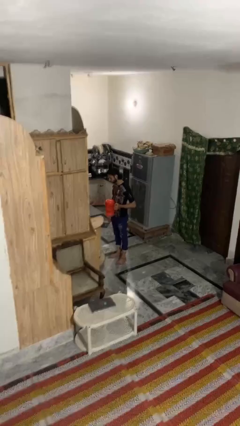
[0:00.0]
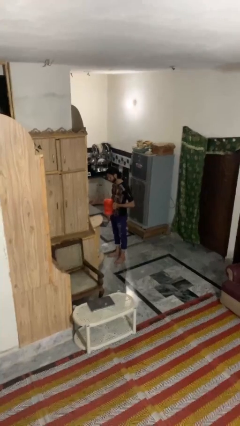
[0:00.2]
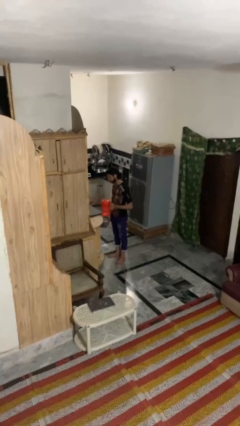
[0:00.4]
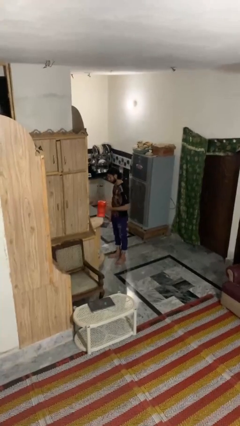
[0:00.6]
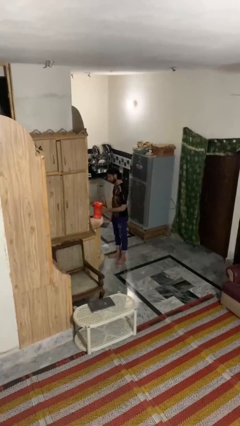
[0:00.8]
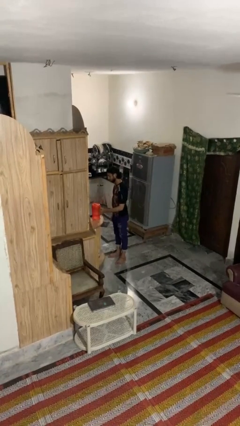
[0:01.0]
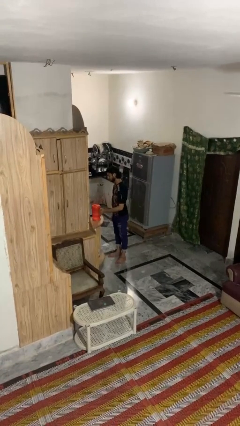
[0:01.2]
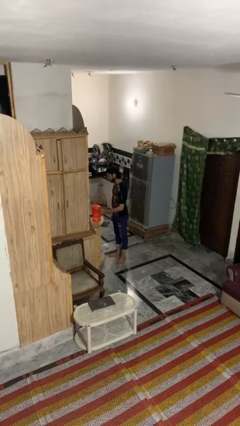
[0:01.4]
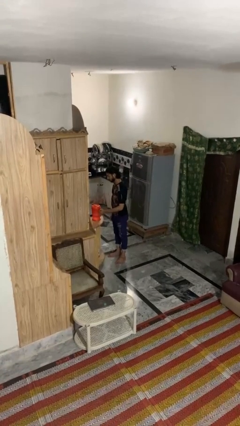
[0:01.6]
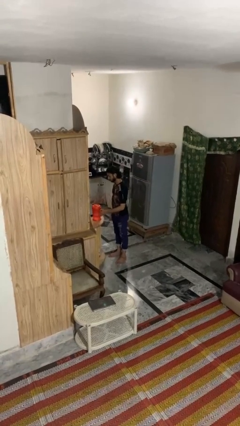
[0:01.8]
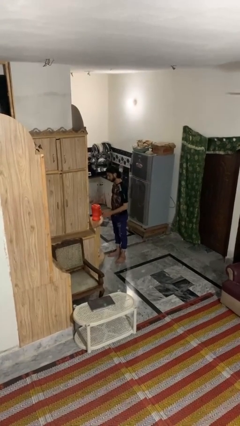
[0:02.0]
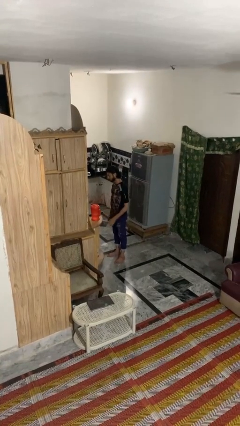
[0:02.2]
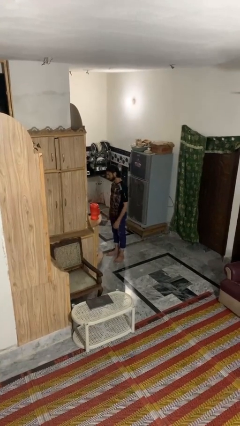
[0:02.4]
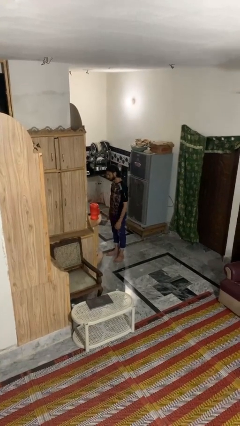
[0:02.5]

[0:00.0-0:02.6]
person puts down object on countertop

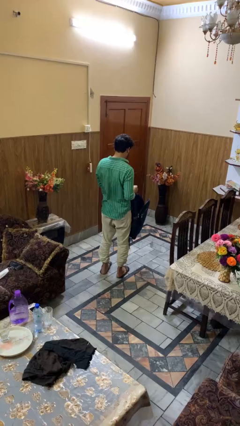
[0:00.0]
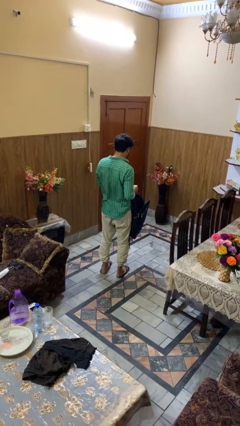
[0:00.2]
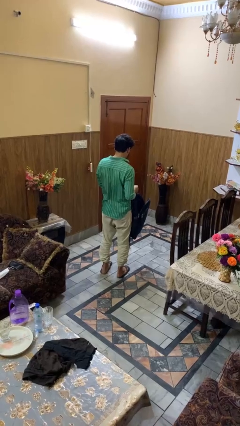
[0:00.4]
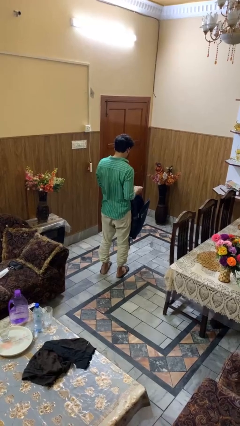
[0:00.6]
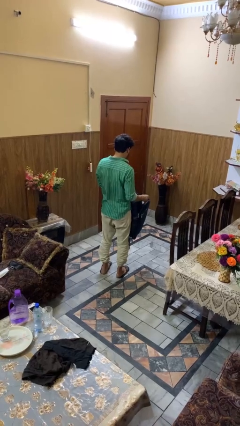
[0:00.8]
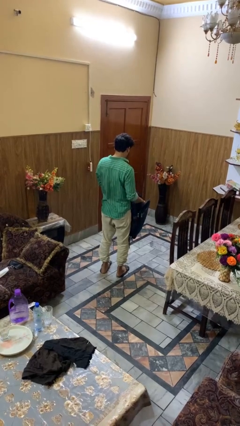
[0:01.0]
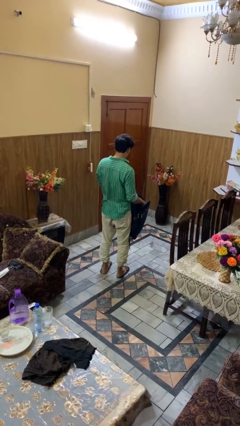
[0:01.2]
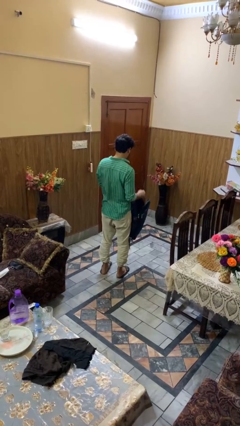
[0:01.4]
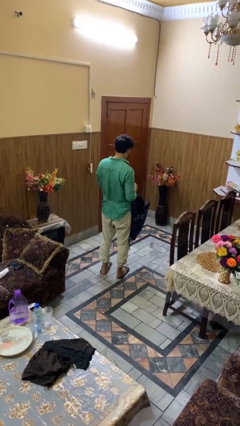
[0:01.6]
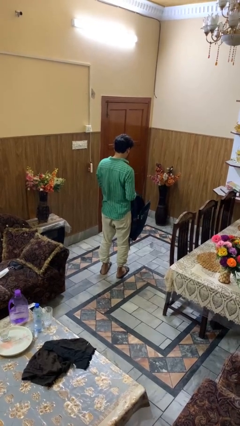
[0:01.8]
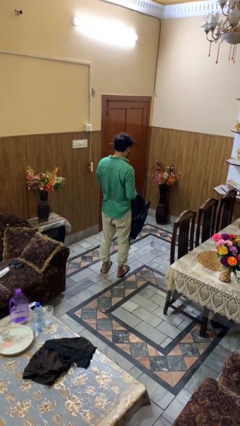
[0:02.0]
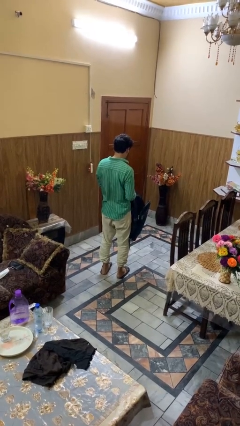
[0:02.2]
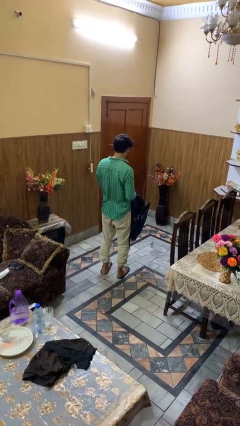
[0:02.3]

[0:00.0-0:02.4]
person puts object into backpack

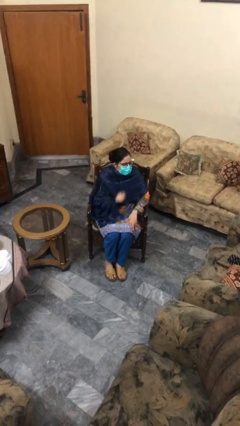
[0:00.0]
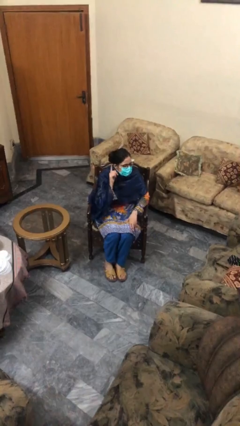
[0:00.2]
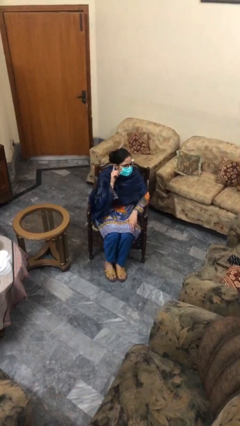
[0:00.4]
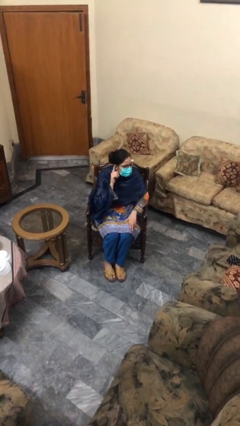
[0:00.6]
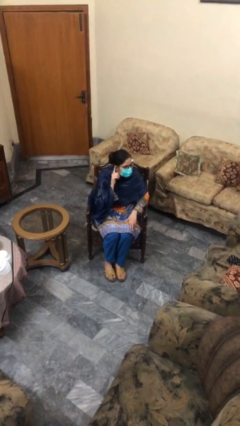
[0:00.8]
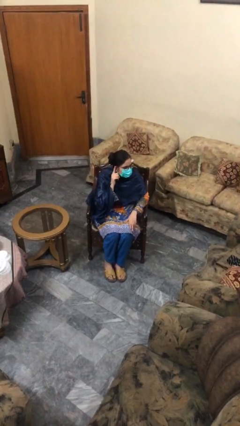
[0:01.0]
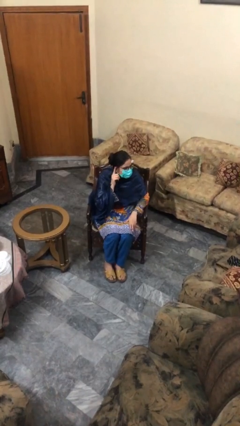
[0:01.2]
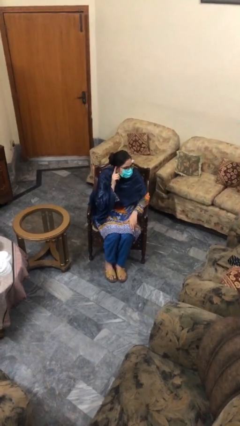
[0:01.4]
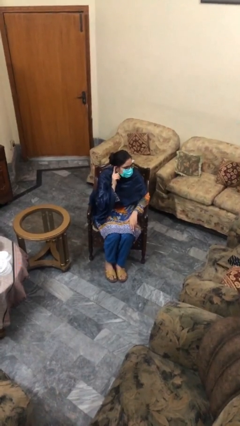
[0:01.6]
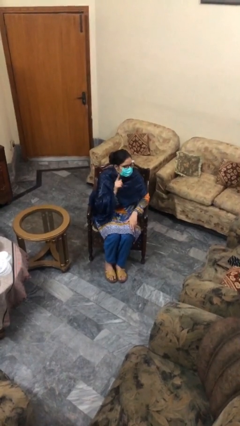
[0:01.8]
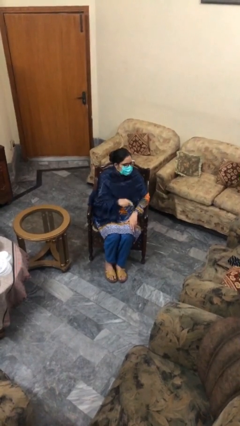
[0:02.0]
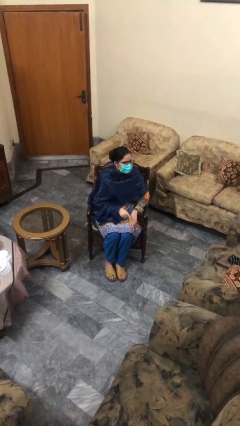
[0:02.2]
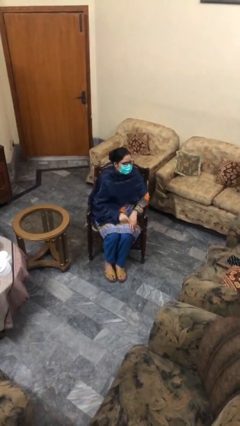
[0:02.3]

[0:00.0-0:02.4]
person gestures listen closely

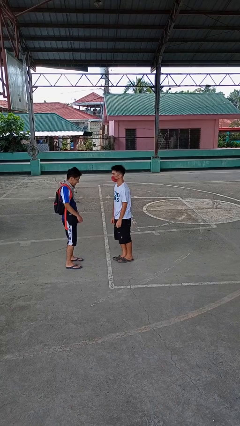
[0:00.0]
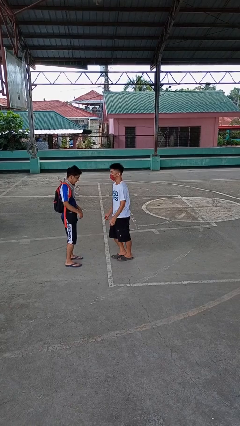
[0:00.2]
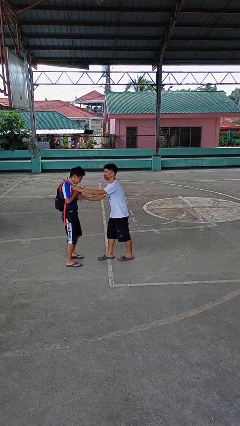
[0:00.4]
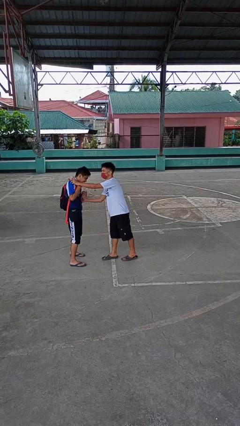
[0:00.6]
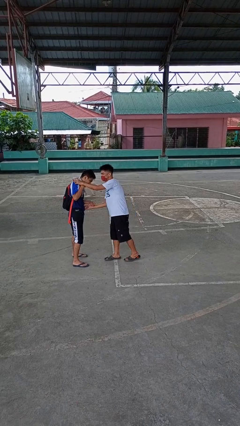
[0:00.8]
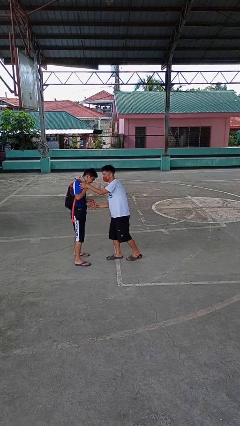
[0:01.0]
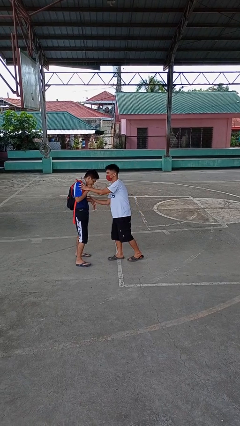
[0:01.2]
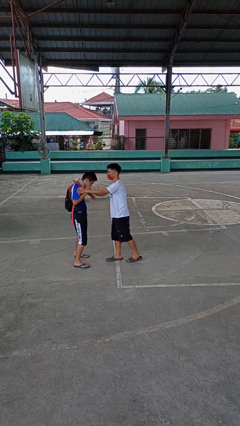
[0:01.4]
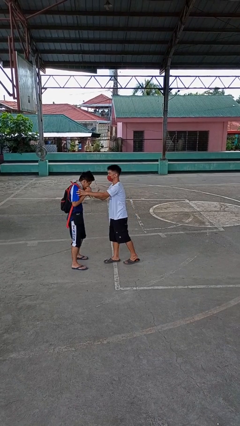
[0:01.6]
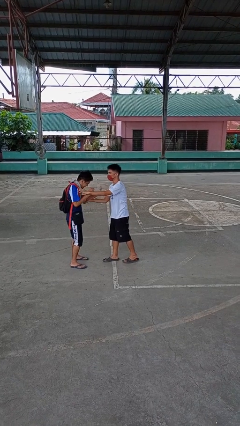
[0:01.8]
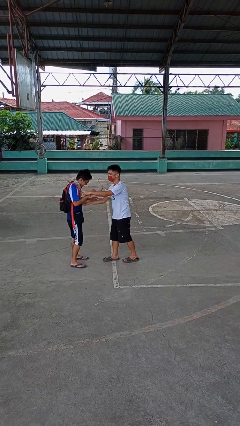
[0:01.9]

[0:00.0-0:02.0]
person tickles person

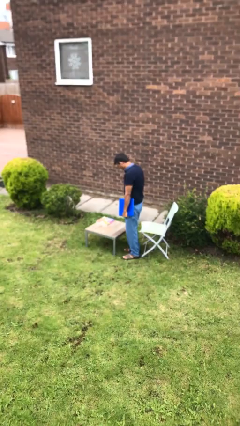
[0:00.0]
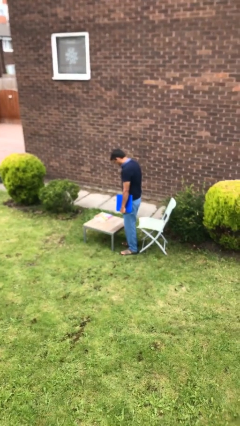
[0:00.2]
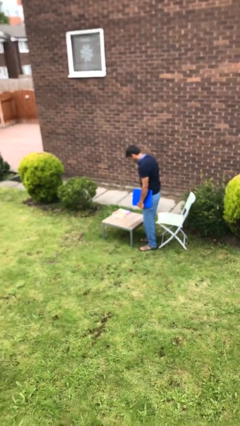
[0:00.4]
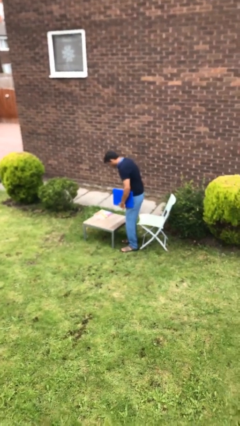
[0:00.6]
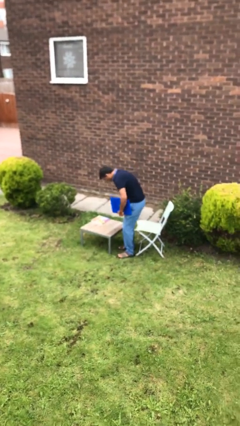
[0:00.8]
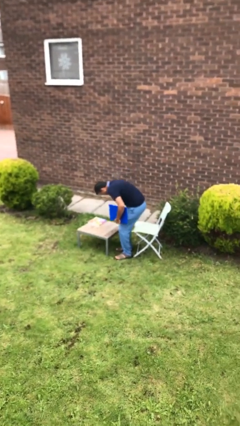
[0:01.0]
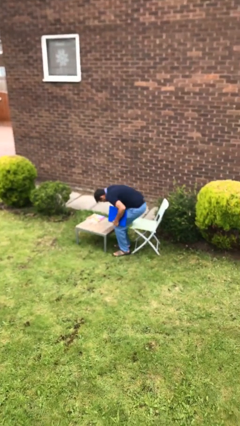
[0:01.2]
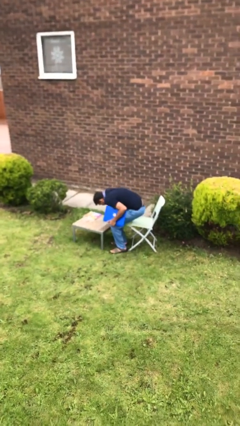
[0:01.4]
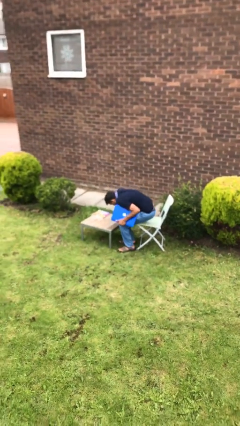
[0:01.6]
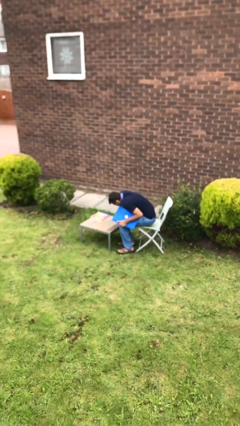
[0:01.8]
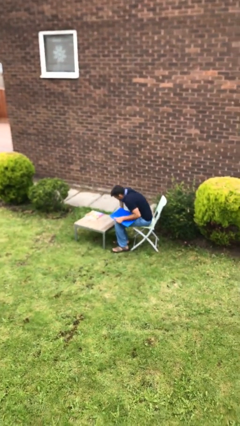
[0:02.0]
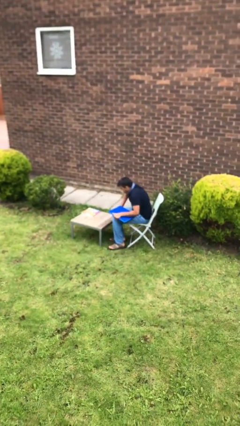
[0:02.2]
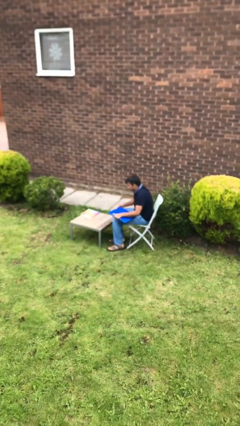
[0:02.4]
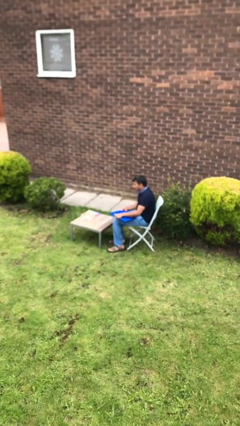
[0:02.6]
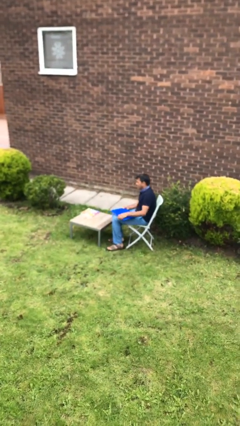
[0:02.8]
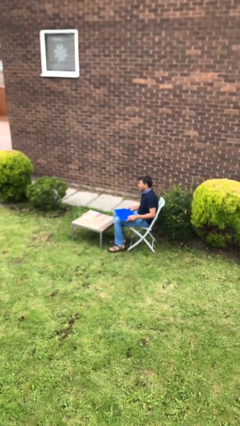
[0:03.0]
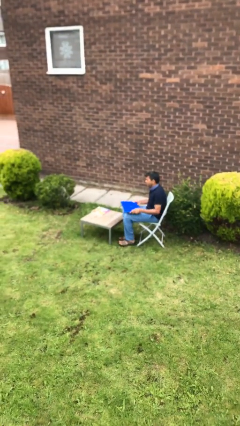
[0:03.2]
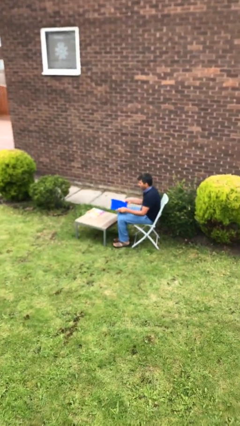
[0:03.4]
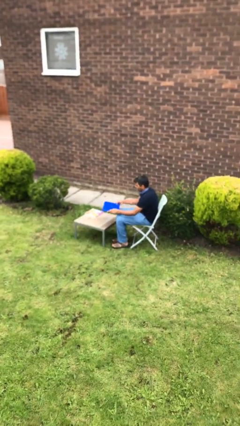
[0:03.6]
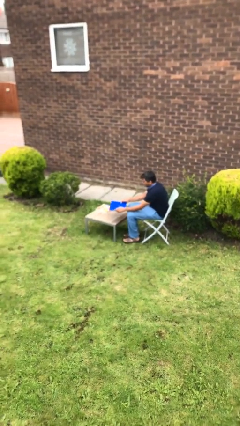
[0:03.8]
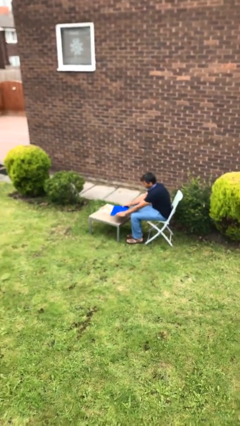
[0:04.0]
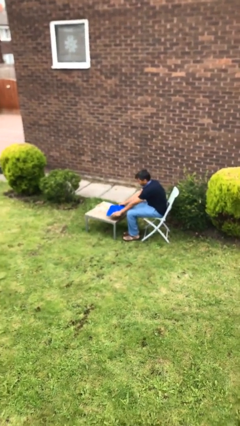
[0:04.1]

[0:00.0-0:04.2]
person sits down

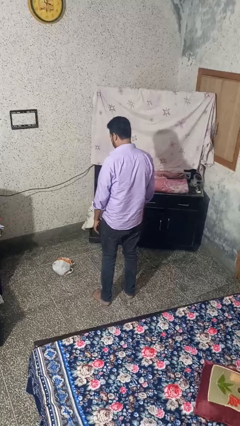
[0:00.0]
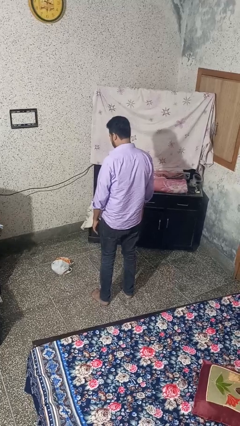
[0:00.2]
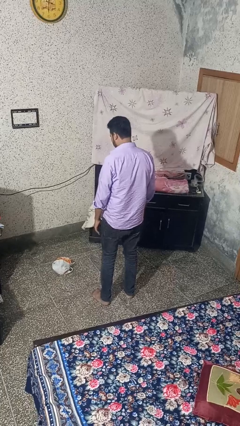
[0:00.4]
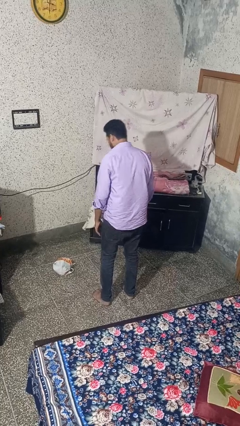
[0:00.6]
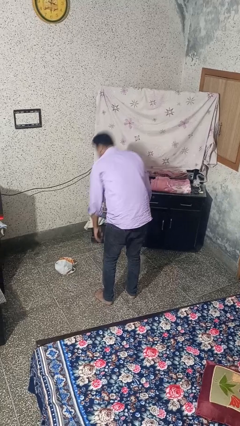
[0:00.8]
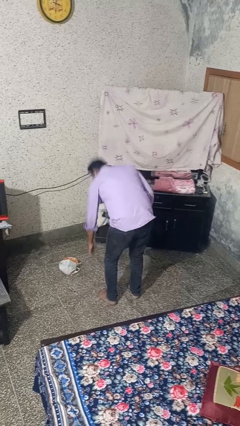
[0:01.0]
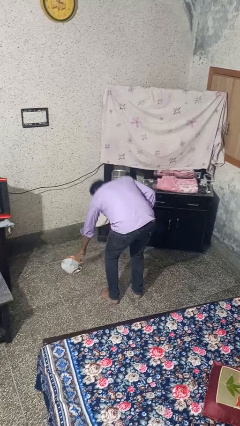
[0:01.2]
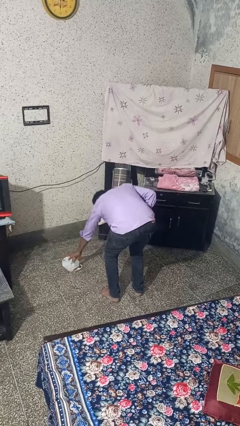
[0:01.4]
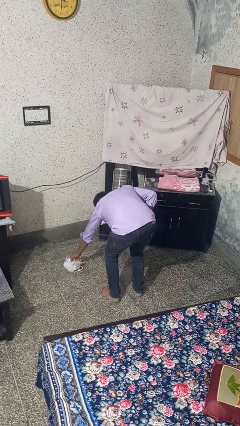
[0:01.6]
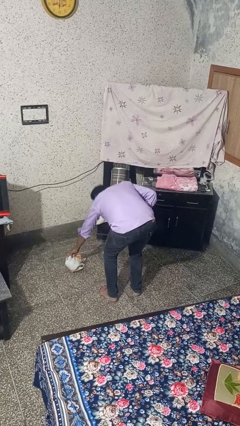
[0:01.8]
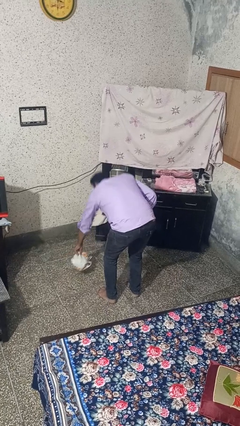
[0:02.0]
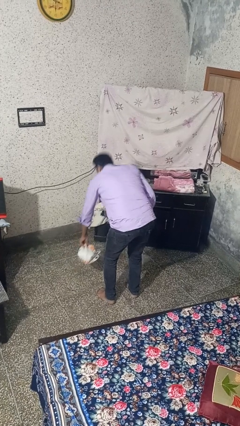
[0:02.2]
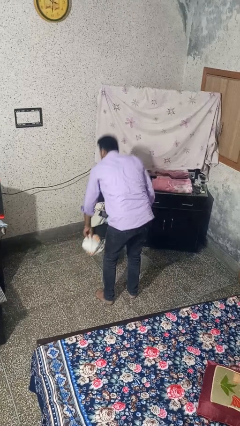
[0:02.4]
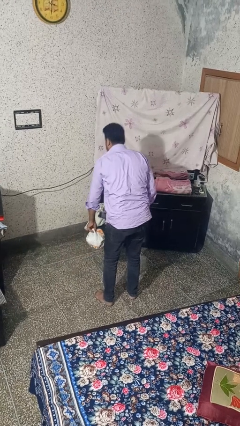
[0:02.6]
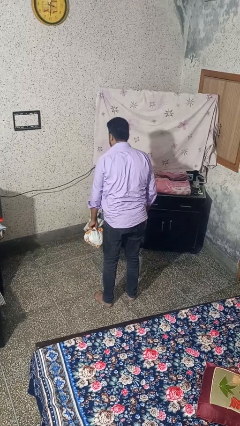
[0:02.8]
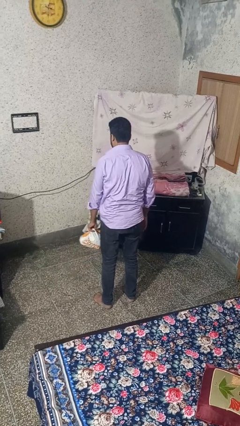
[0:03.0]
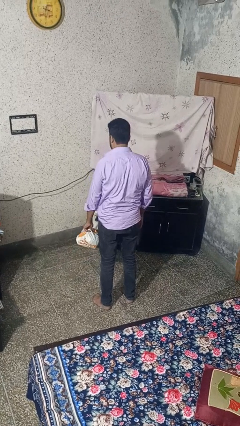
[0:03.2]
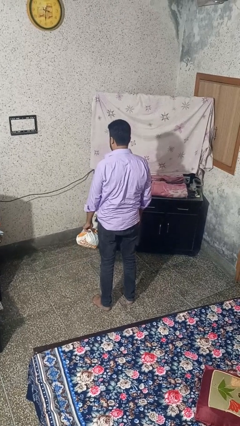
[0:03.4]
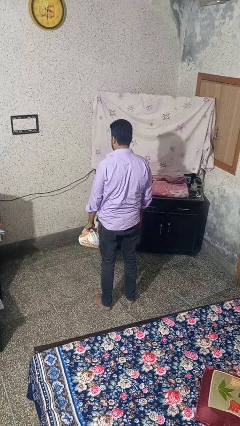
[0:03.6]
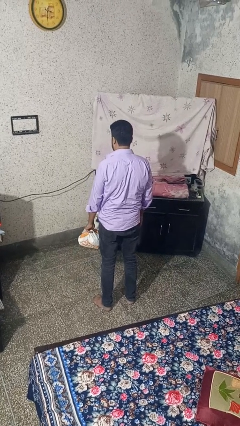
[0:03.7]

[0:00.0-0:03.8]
person picks up object from floor

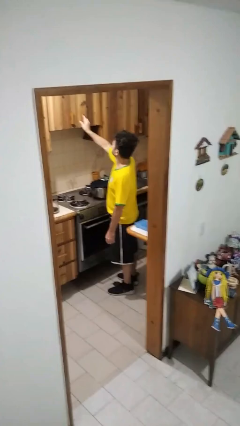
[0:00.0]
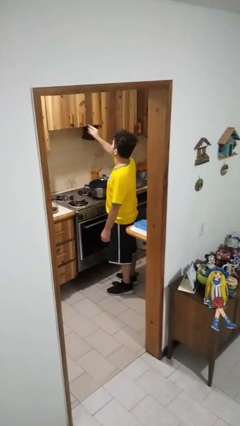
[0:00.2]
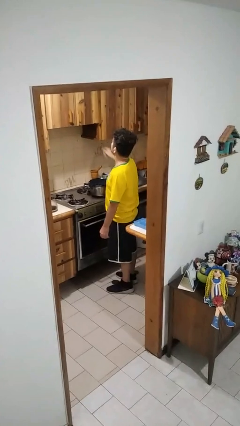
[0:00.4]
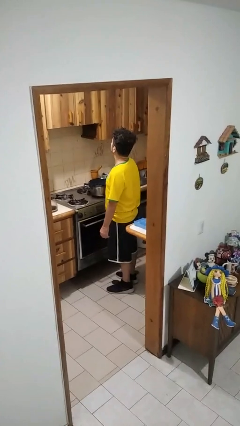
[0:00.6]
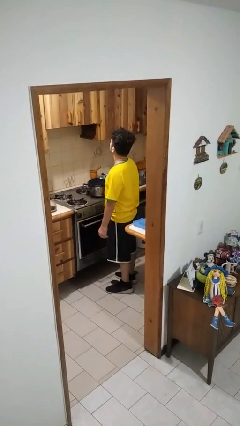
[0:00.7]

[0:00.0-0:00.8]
person closes cabinet
